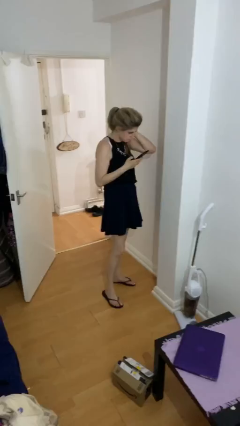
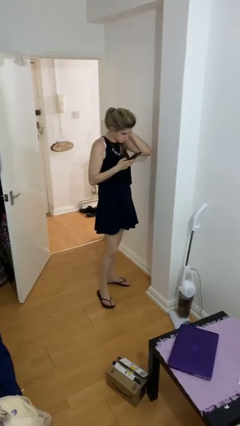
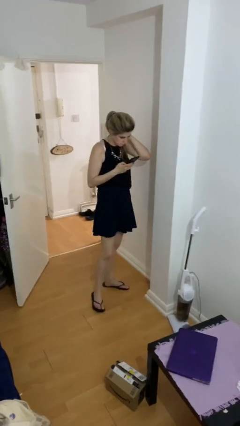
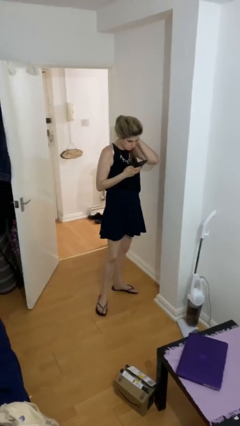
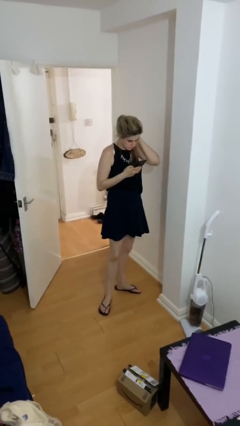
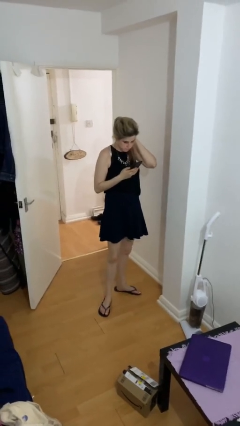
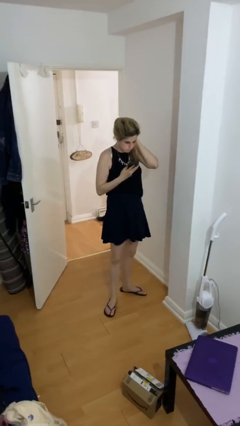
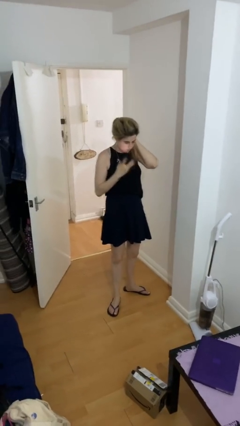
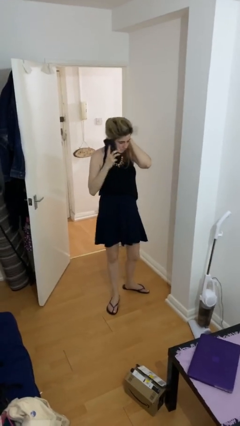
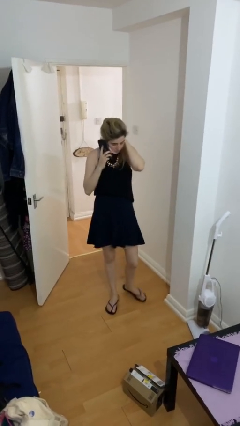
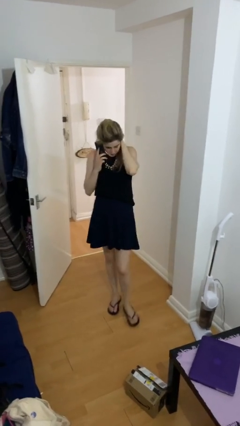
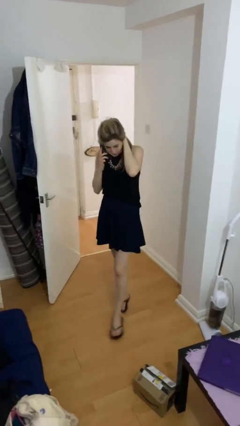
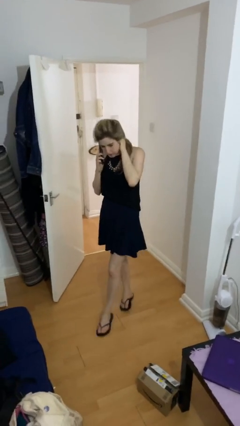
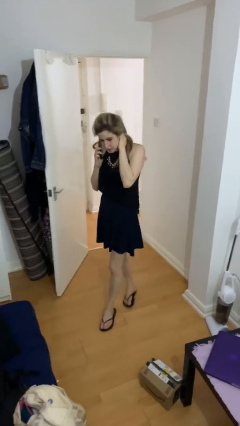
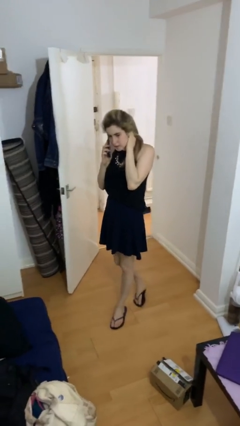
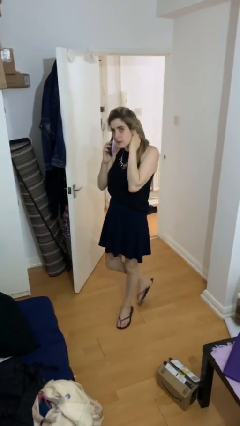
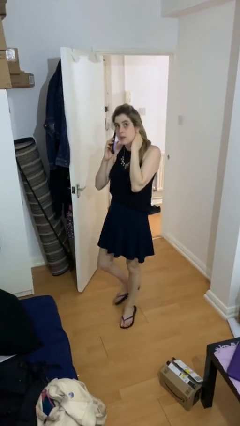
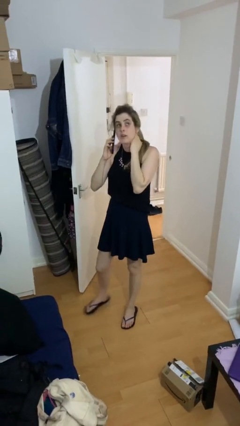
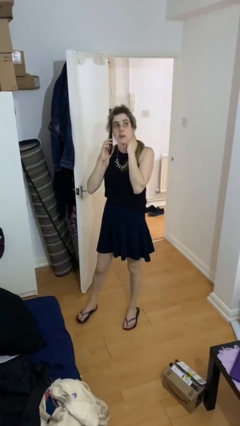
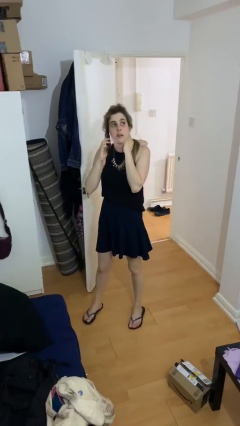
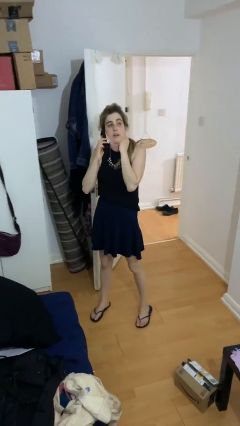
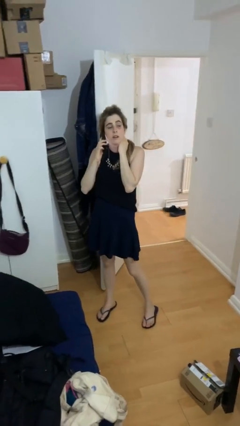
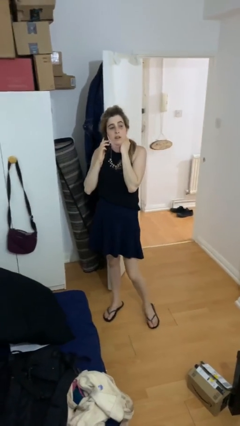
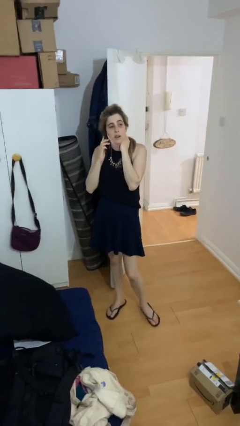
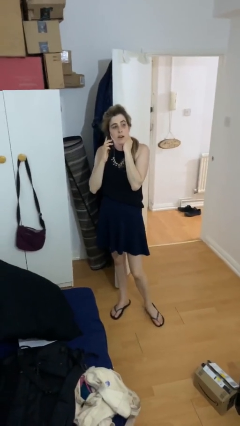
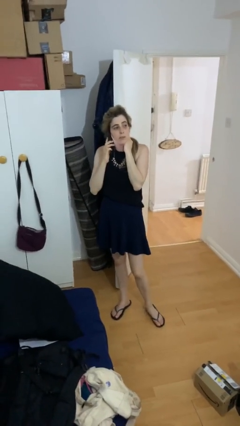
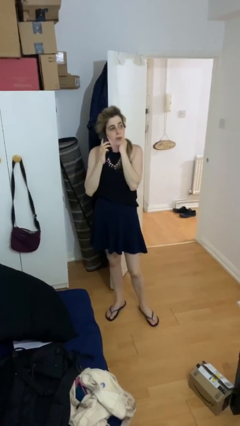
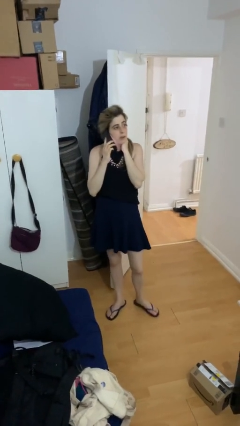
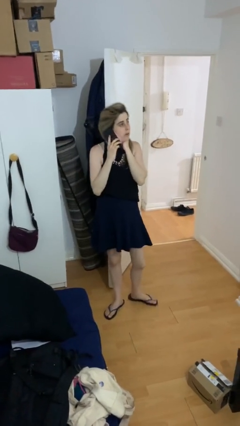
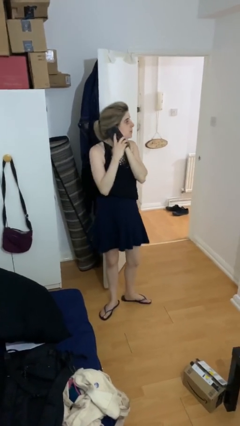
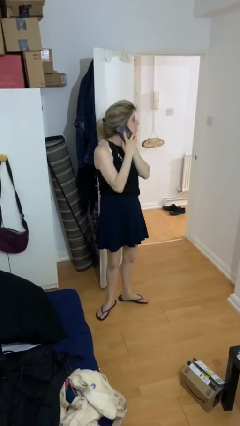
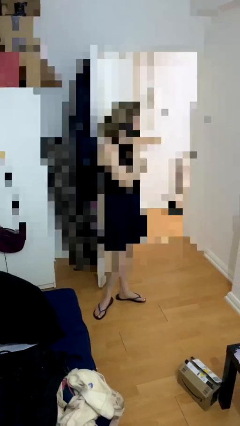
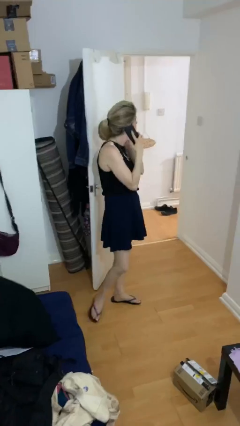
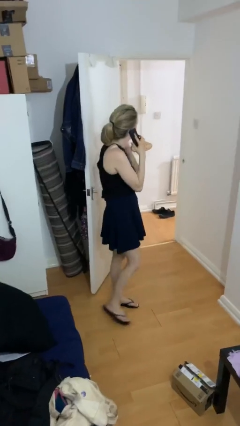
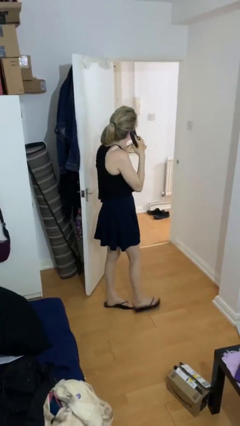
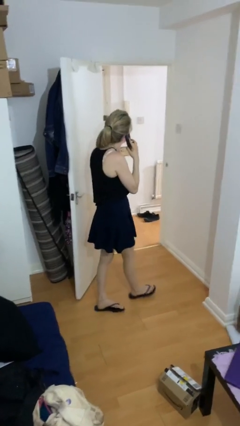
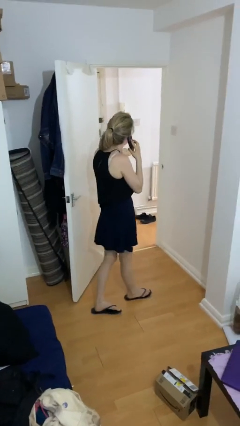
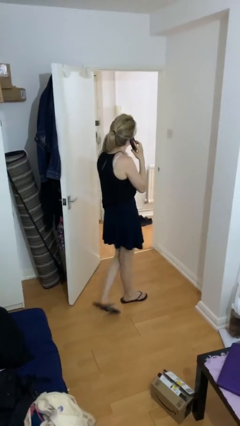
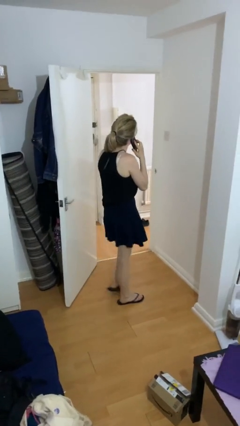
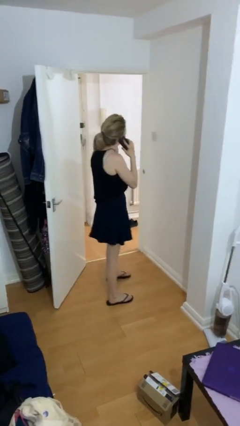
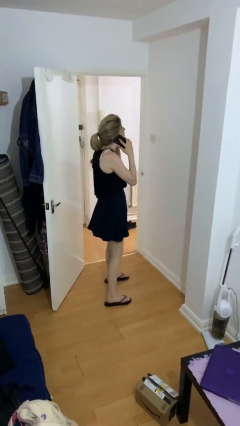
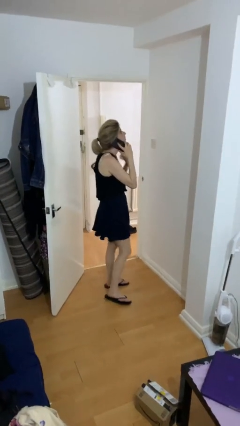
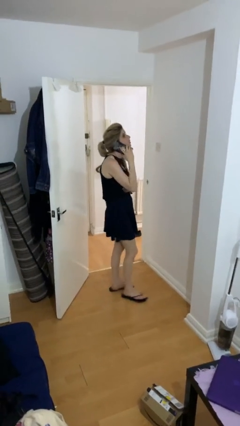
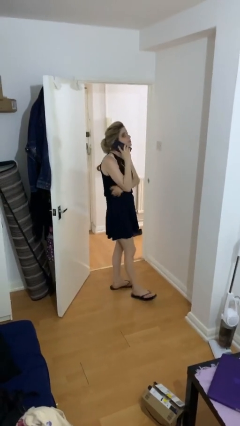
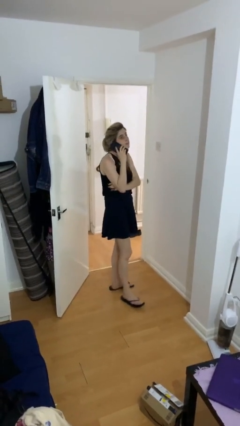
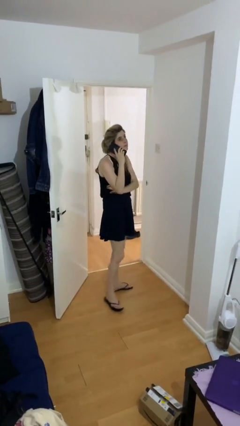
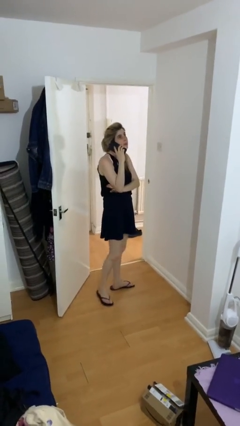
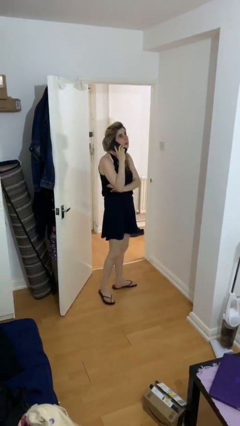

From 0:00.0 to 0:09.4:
person talks on phone

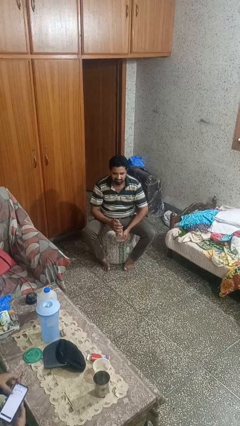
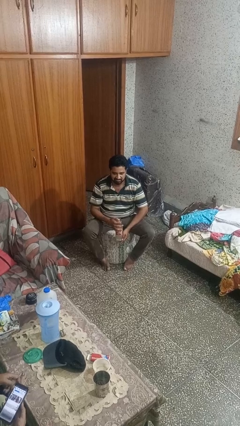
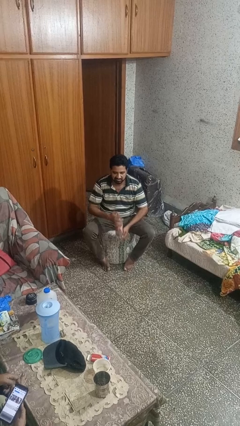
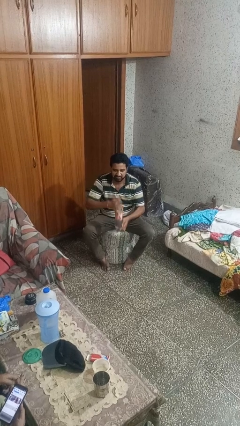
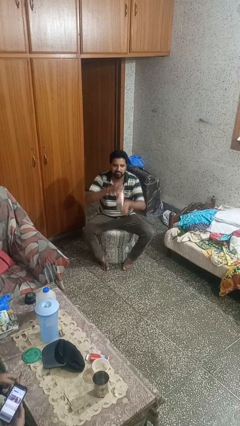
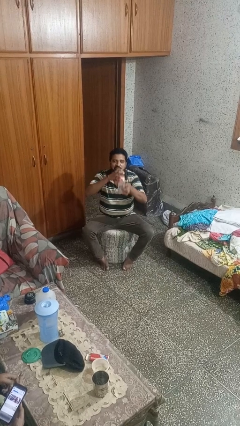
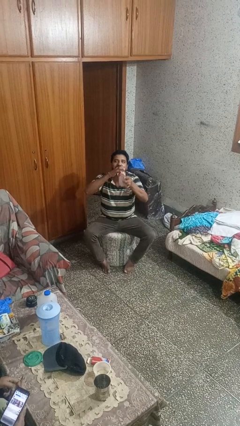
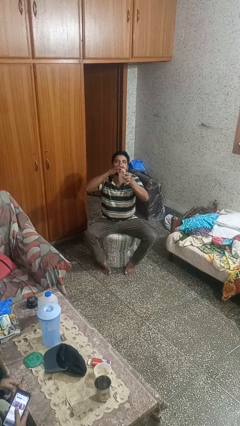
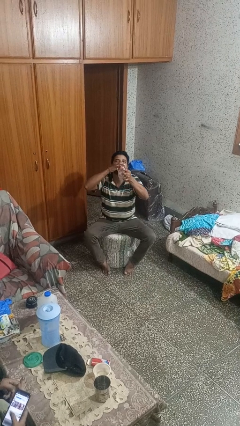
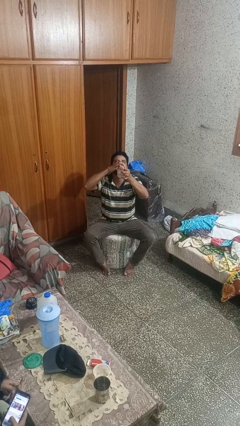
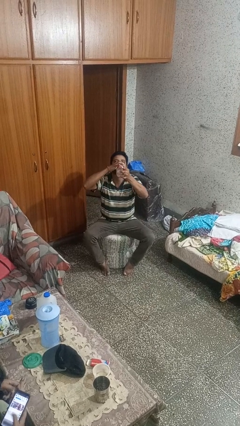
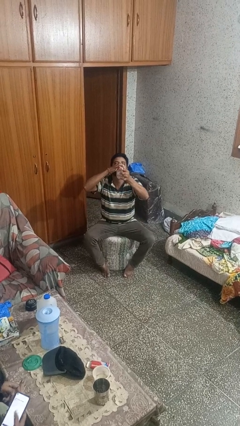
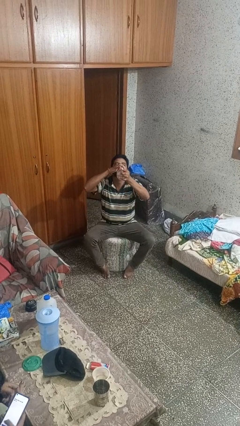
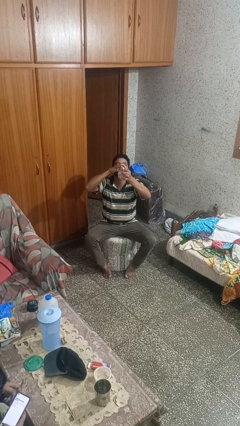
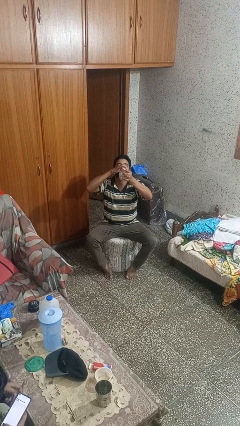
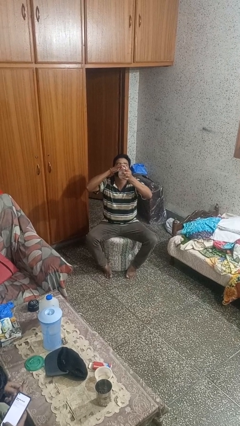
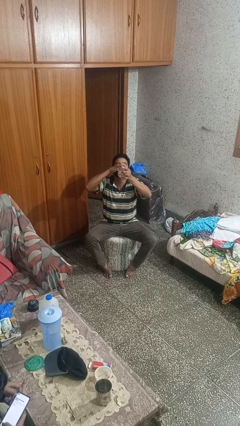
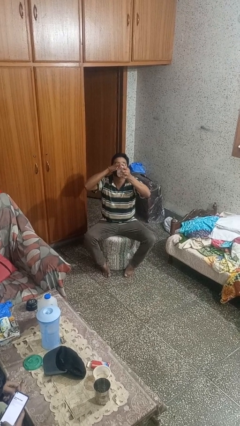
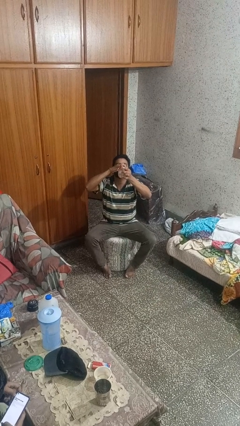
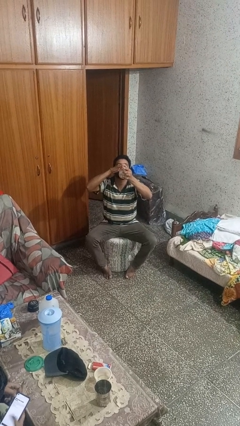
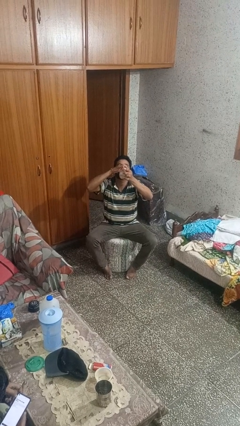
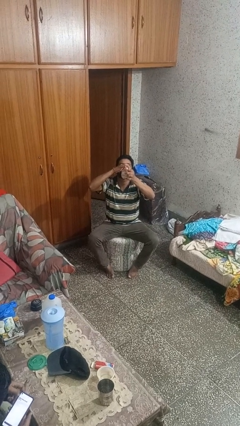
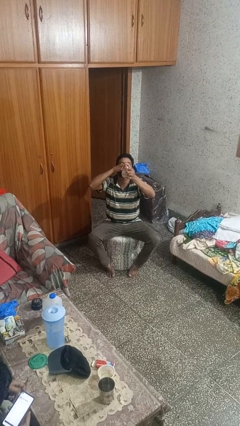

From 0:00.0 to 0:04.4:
person drinks from bottle

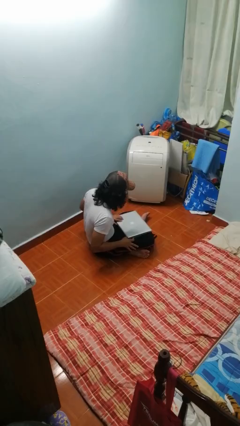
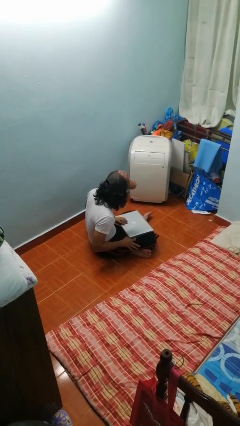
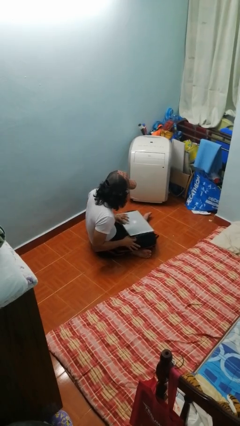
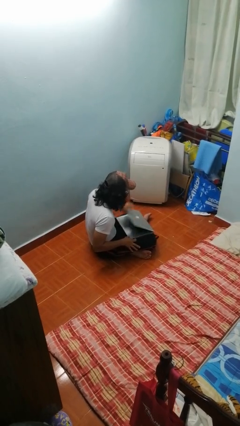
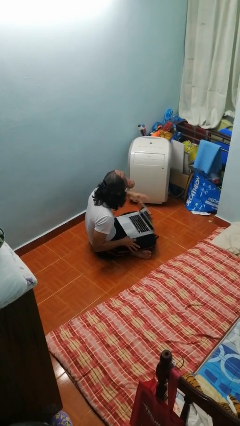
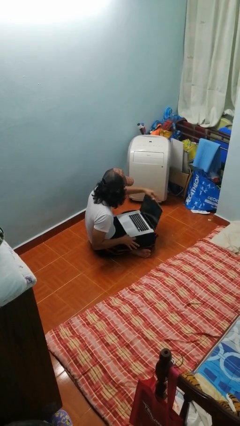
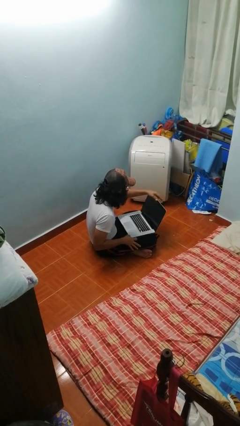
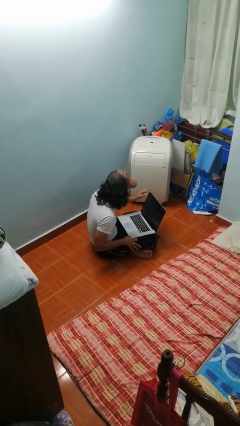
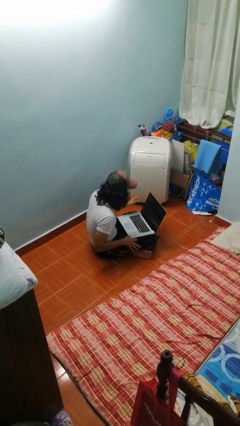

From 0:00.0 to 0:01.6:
person opens laptop

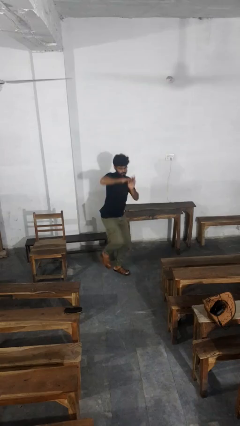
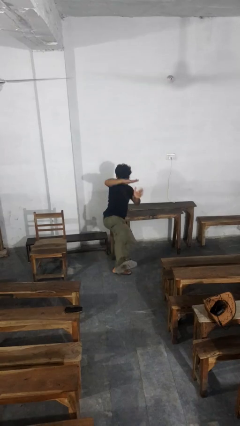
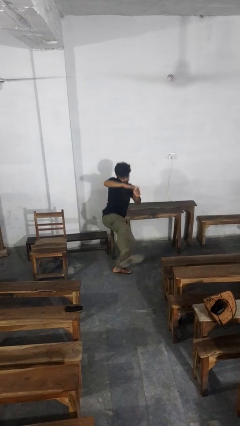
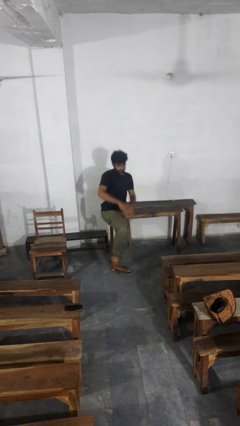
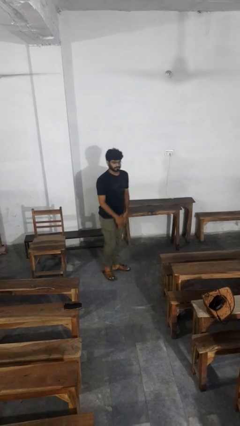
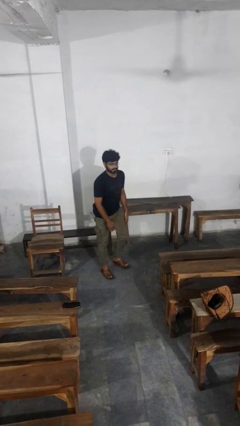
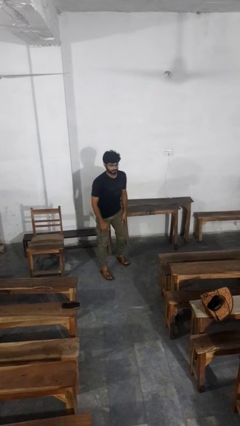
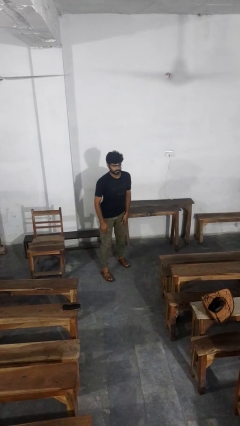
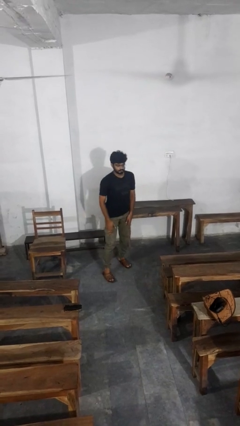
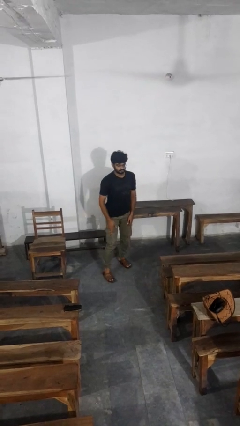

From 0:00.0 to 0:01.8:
person karate kicks

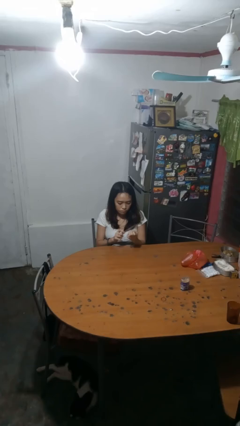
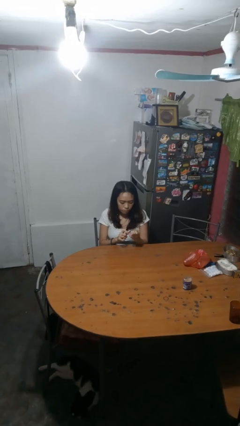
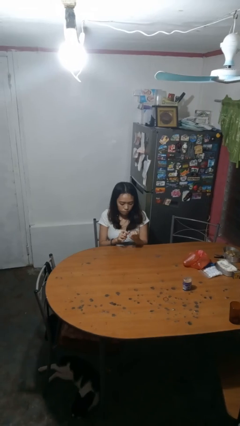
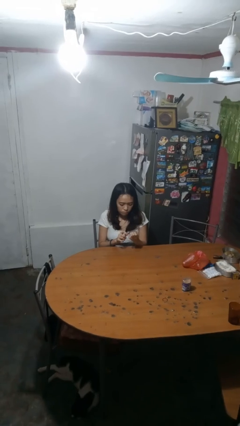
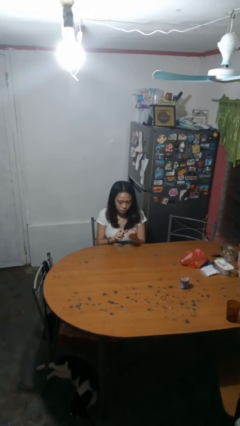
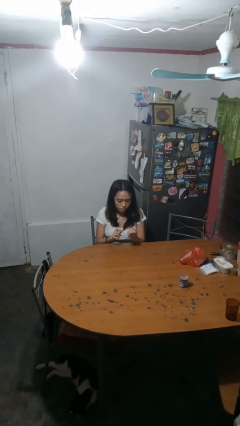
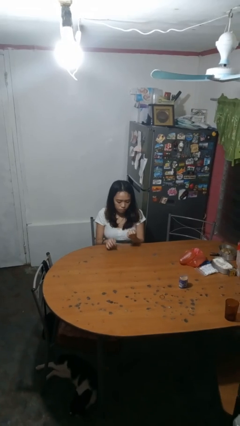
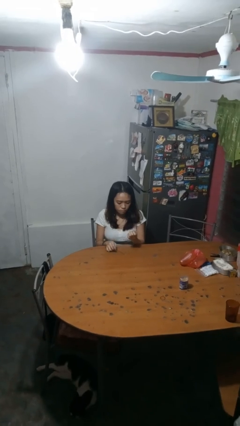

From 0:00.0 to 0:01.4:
person files fingernails
